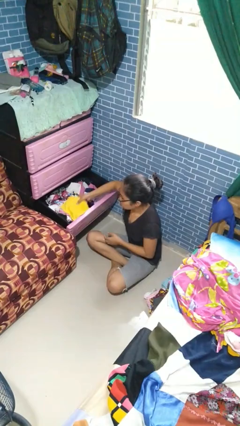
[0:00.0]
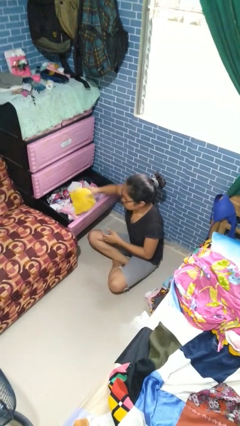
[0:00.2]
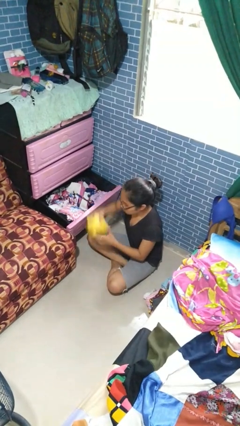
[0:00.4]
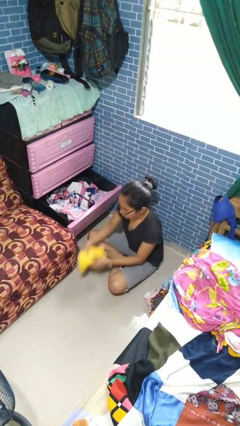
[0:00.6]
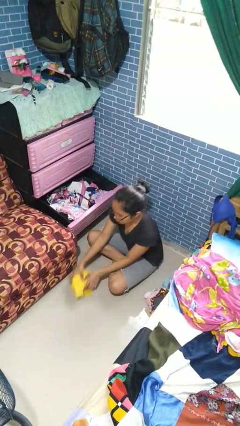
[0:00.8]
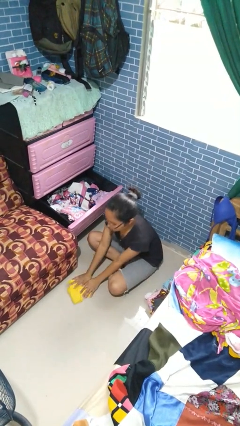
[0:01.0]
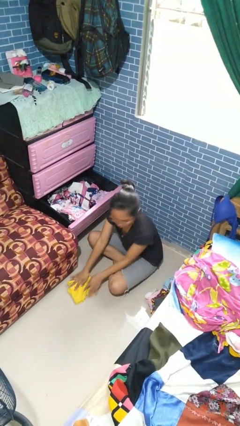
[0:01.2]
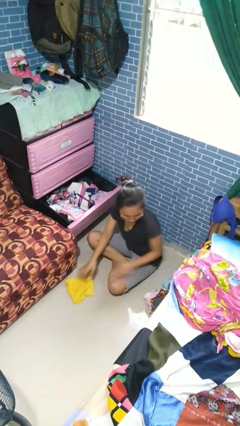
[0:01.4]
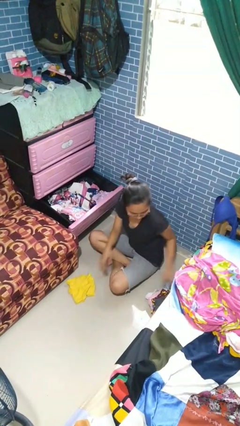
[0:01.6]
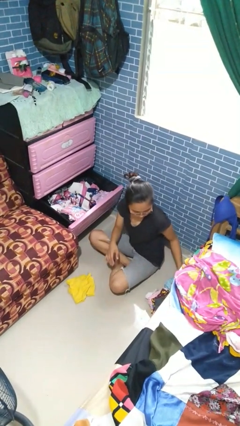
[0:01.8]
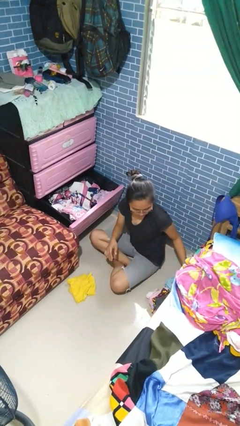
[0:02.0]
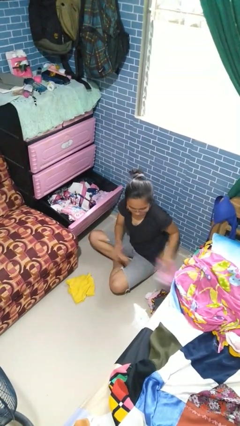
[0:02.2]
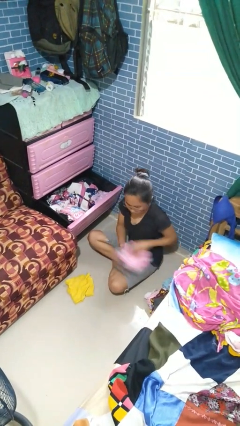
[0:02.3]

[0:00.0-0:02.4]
person takes clothes from dresser

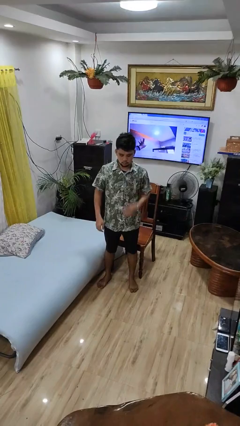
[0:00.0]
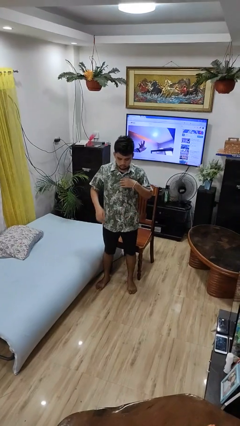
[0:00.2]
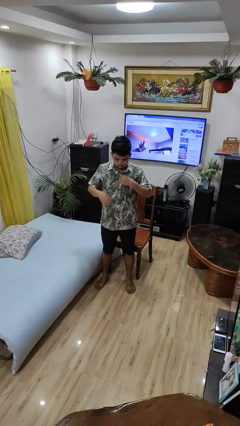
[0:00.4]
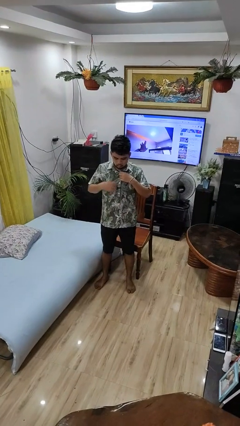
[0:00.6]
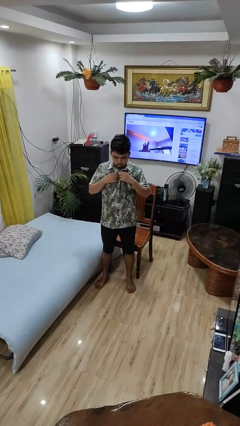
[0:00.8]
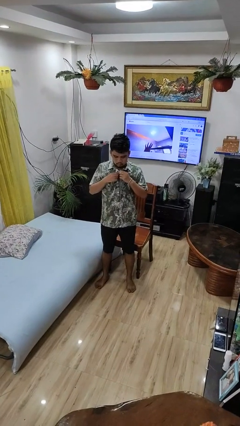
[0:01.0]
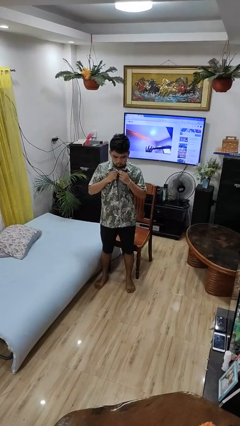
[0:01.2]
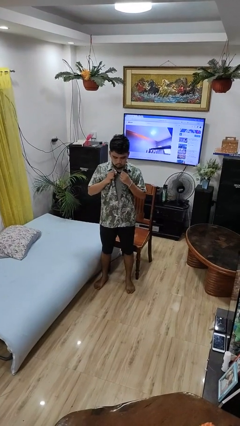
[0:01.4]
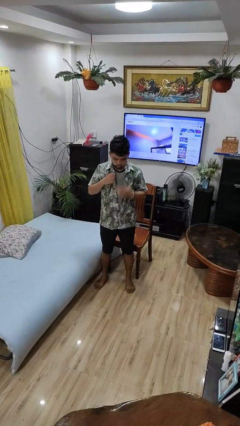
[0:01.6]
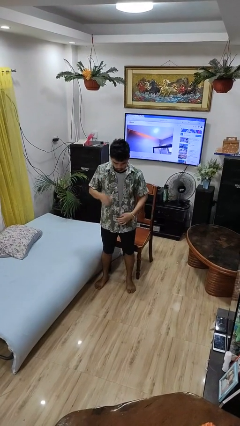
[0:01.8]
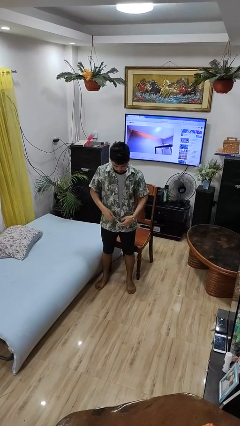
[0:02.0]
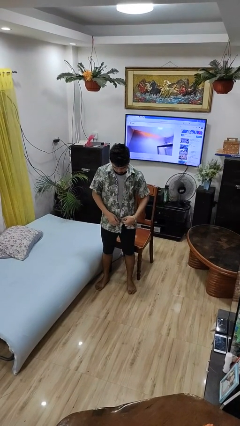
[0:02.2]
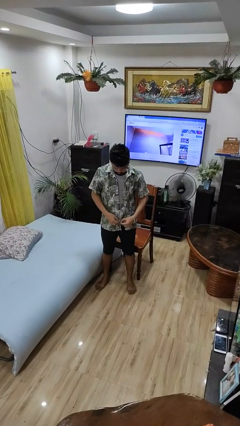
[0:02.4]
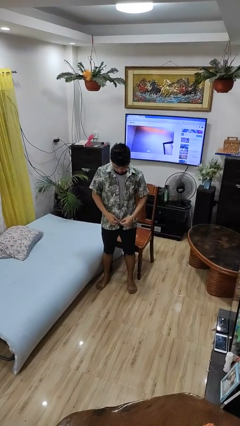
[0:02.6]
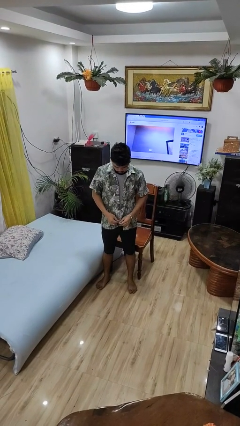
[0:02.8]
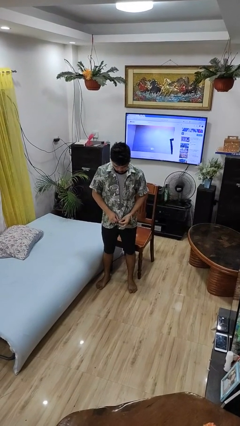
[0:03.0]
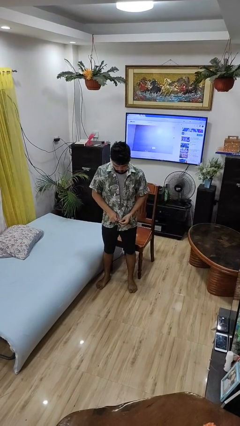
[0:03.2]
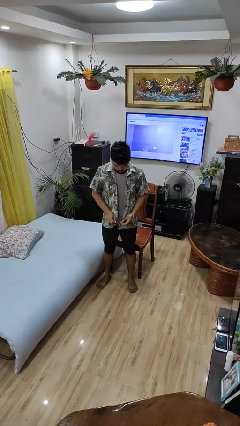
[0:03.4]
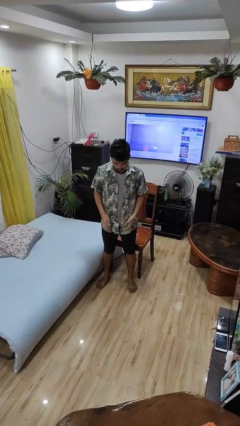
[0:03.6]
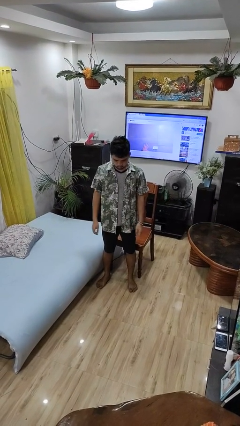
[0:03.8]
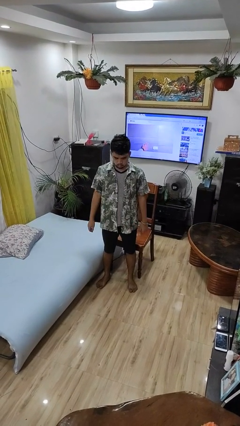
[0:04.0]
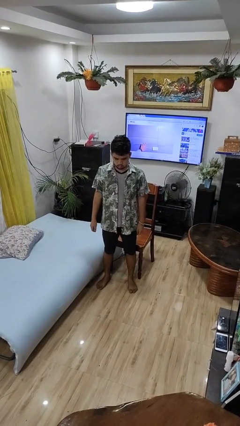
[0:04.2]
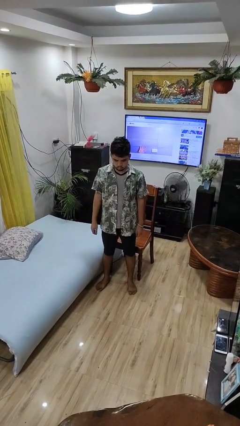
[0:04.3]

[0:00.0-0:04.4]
person unbuttons shirt

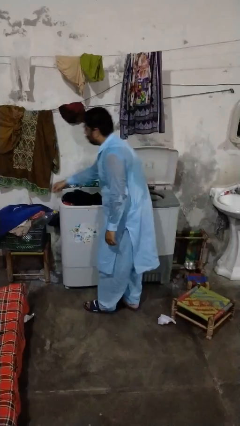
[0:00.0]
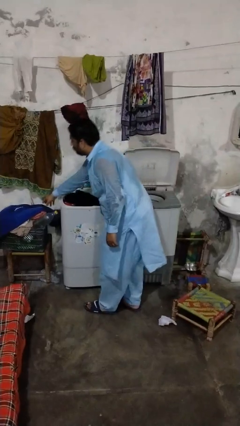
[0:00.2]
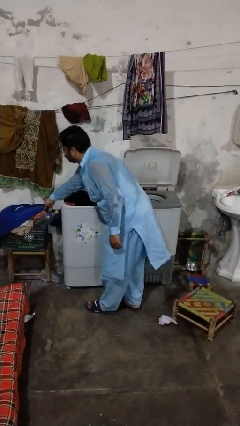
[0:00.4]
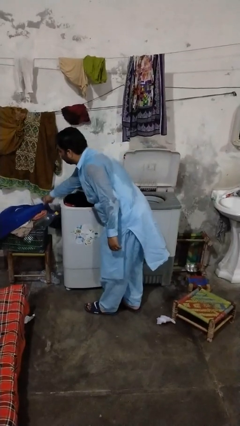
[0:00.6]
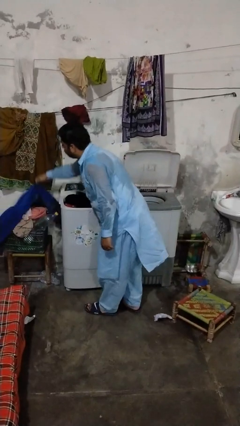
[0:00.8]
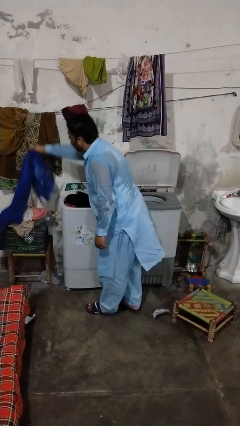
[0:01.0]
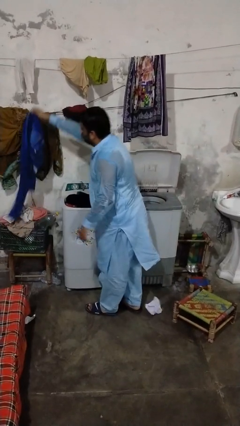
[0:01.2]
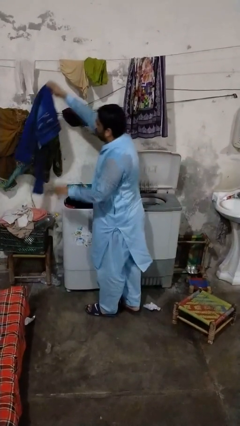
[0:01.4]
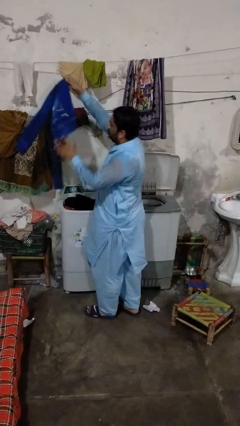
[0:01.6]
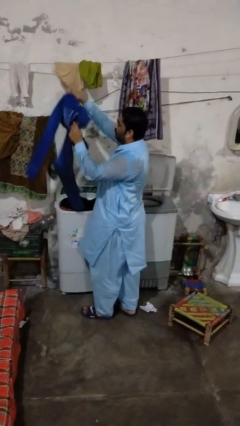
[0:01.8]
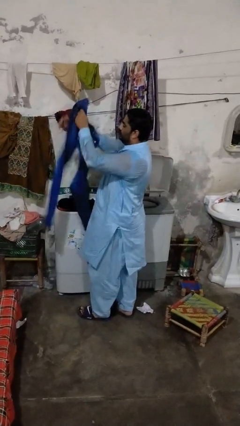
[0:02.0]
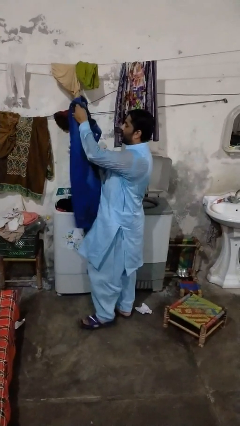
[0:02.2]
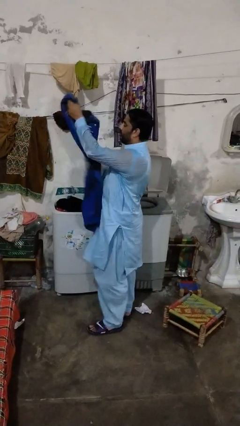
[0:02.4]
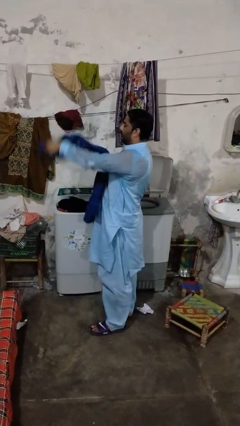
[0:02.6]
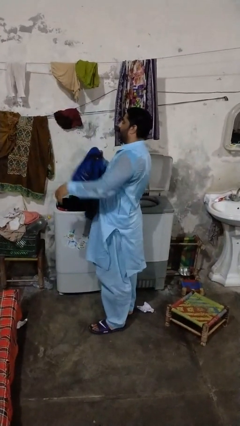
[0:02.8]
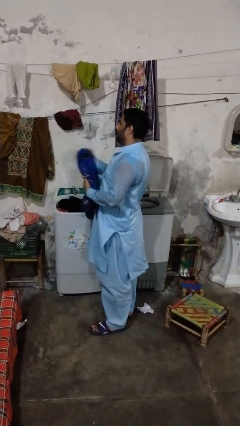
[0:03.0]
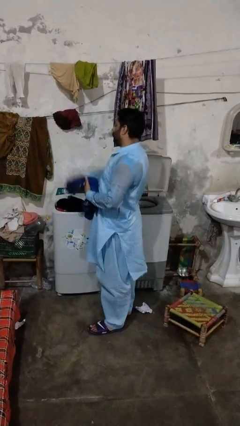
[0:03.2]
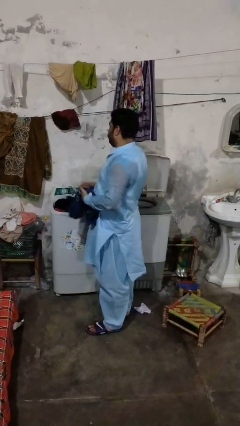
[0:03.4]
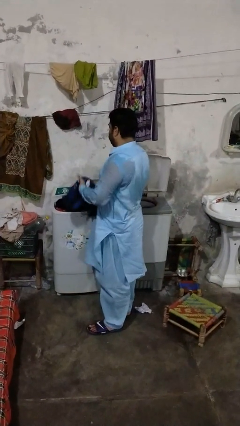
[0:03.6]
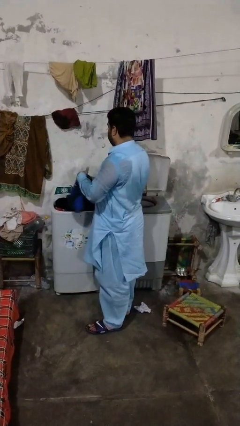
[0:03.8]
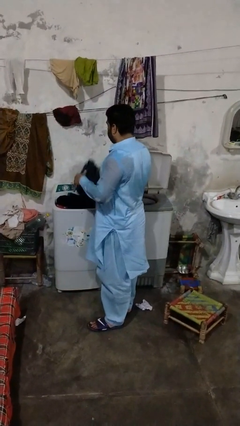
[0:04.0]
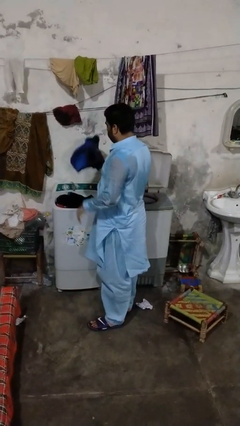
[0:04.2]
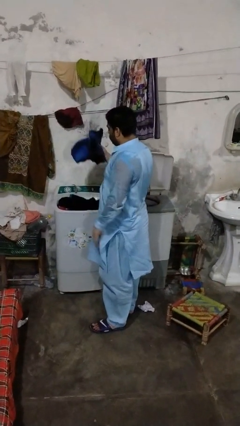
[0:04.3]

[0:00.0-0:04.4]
person loads clotheswasher

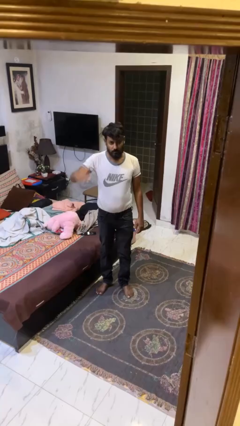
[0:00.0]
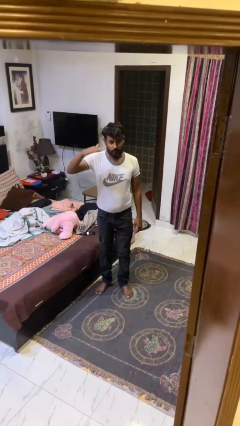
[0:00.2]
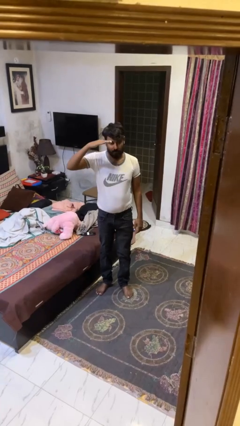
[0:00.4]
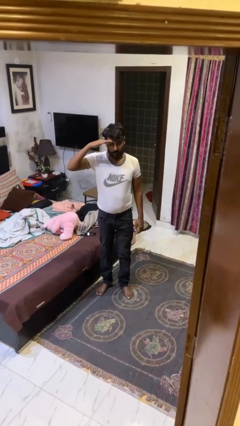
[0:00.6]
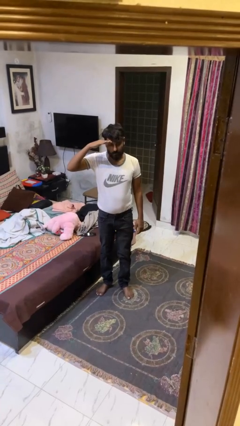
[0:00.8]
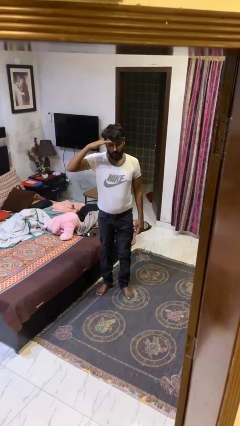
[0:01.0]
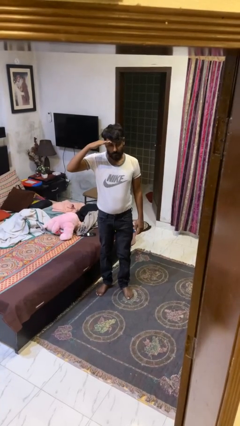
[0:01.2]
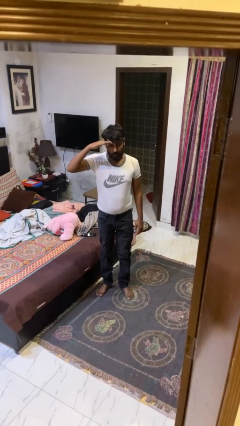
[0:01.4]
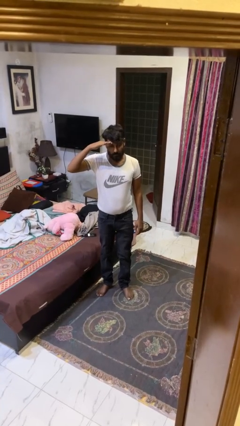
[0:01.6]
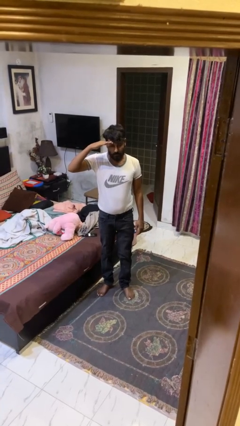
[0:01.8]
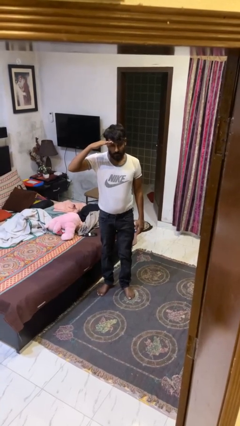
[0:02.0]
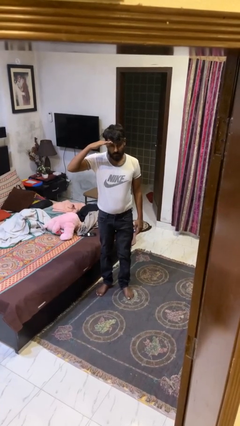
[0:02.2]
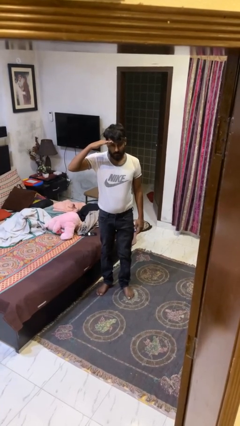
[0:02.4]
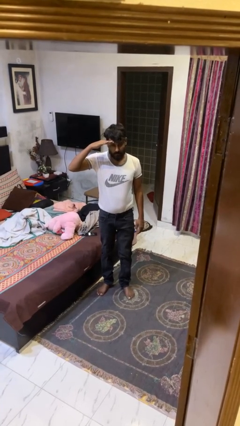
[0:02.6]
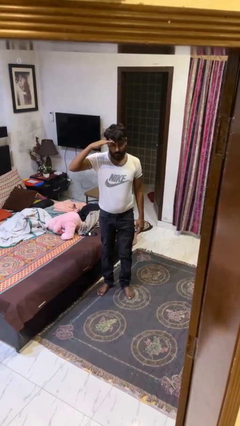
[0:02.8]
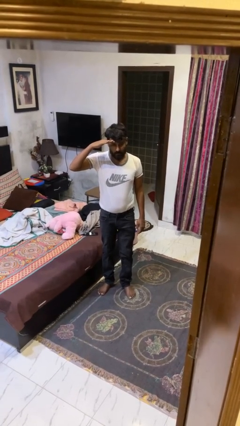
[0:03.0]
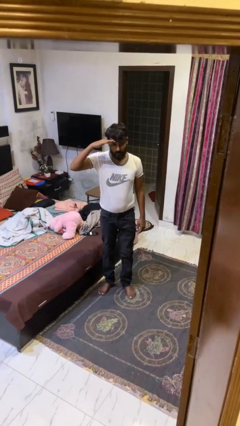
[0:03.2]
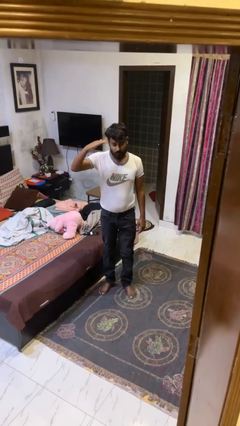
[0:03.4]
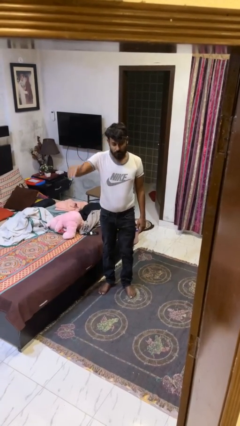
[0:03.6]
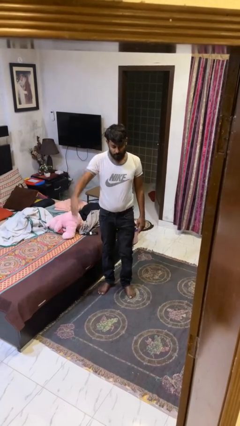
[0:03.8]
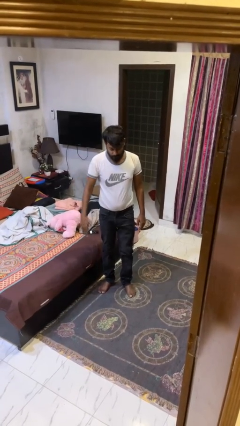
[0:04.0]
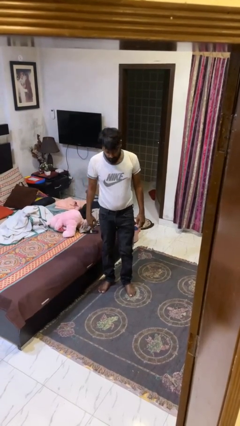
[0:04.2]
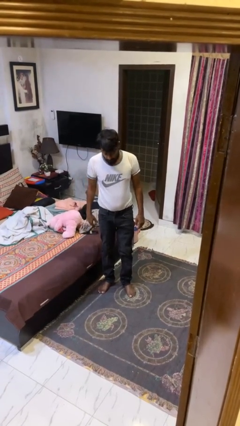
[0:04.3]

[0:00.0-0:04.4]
person salutes

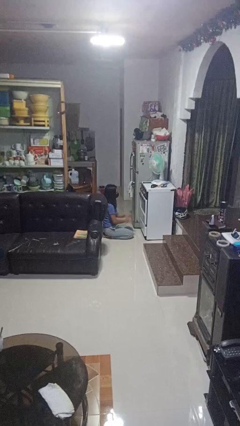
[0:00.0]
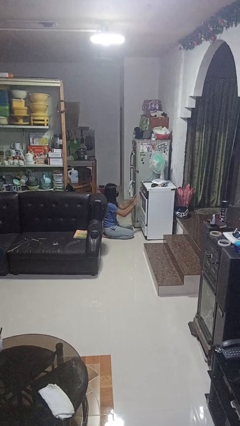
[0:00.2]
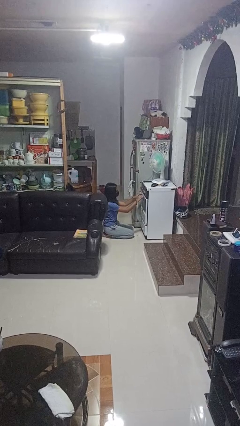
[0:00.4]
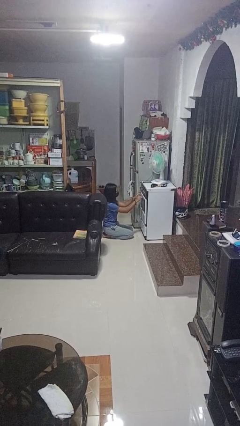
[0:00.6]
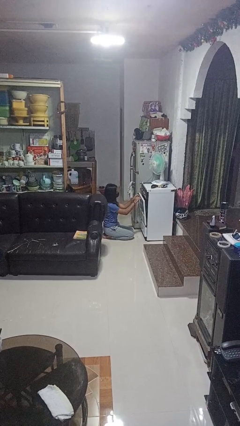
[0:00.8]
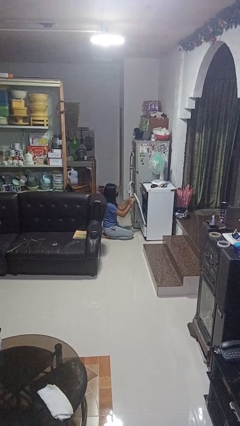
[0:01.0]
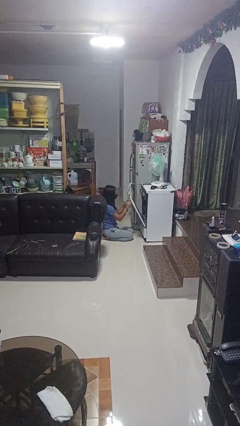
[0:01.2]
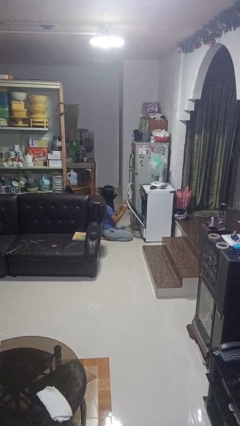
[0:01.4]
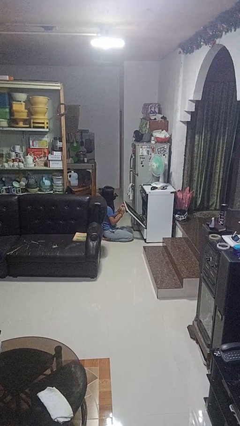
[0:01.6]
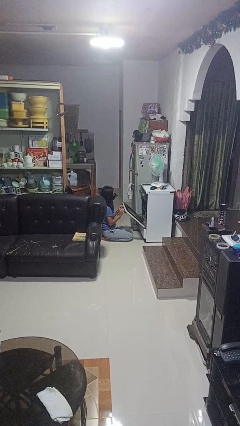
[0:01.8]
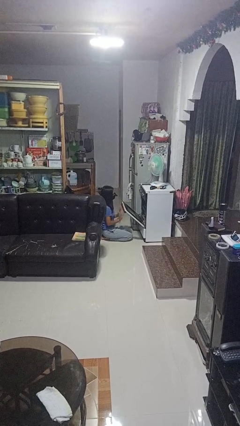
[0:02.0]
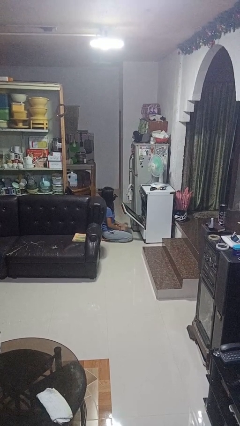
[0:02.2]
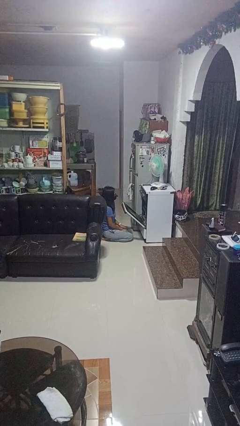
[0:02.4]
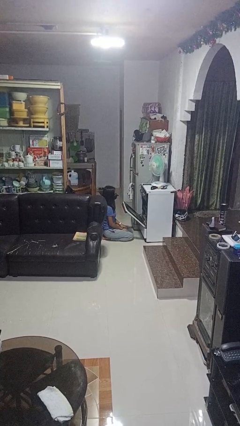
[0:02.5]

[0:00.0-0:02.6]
person opens oven door
